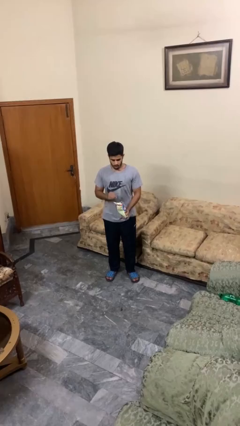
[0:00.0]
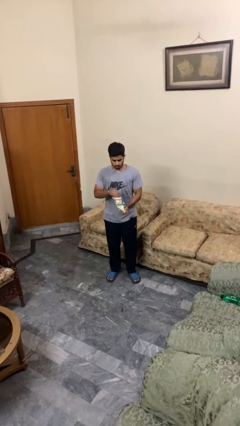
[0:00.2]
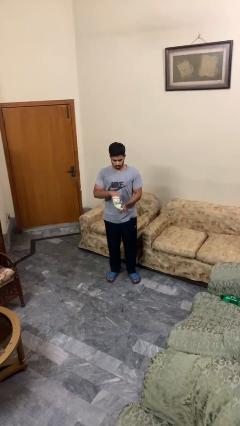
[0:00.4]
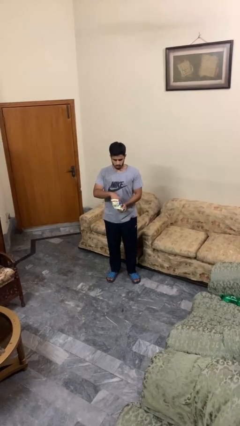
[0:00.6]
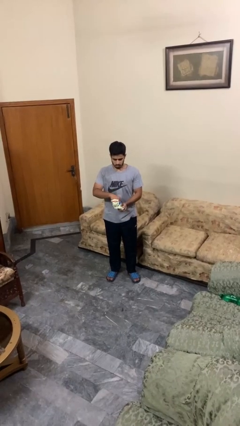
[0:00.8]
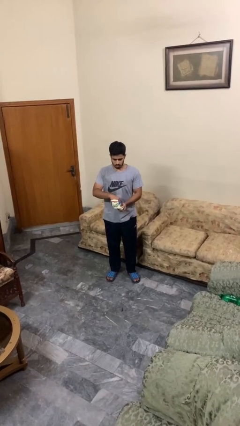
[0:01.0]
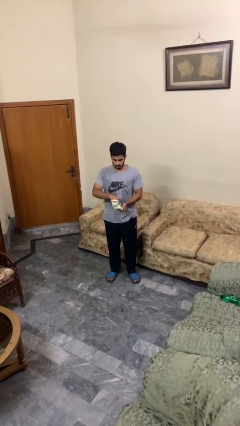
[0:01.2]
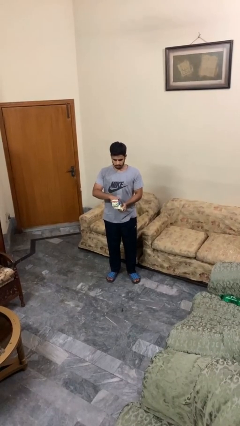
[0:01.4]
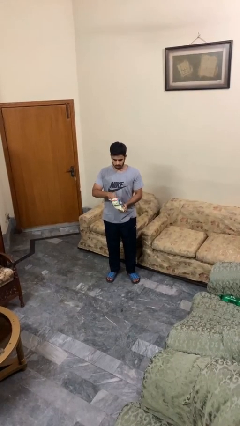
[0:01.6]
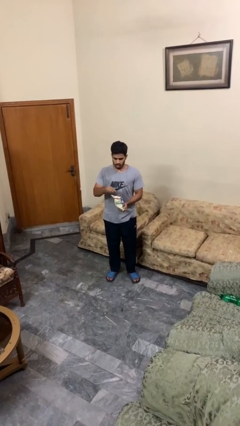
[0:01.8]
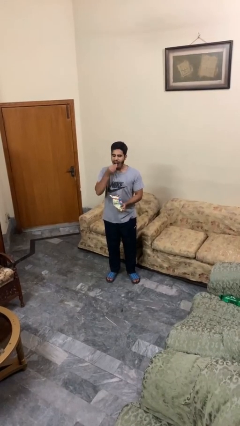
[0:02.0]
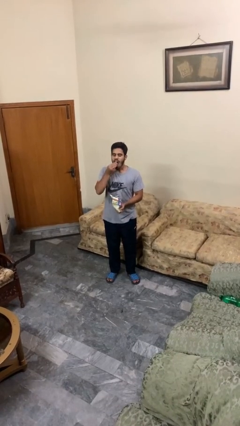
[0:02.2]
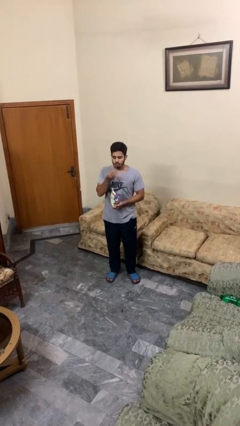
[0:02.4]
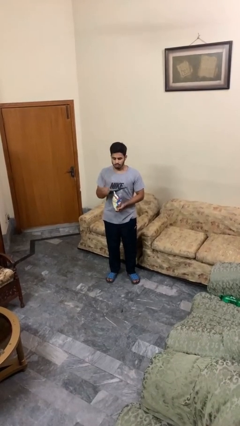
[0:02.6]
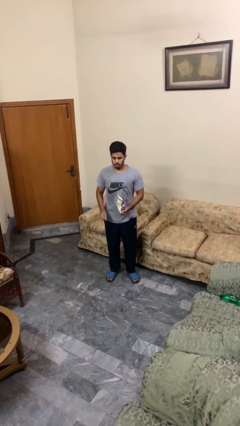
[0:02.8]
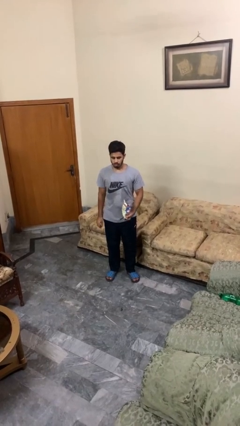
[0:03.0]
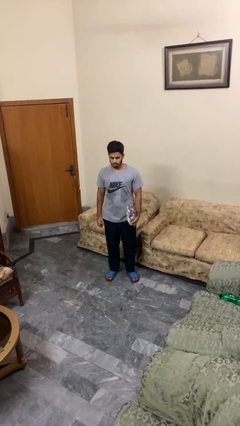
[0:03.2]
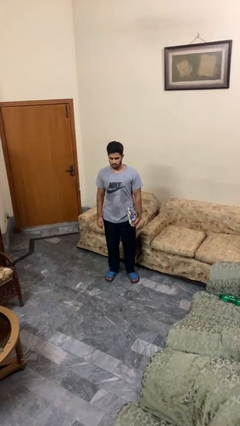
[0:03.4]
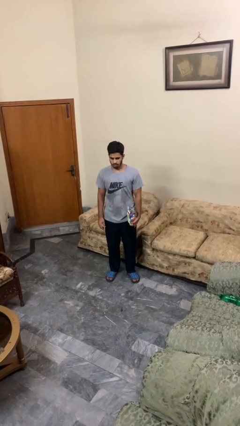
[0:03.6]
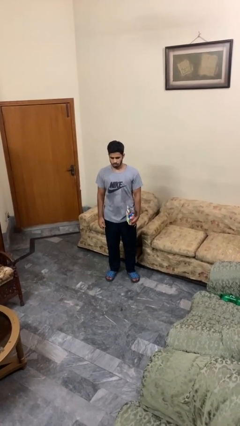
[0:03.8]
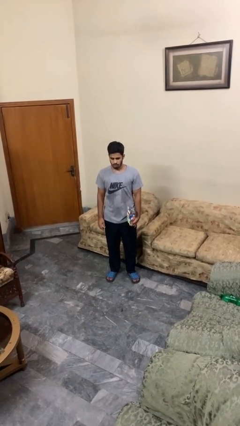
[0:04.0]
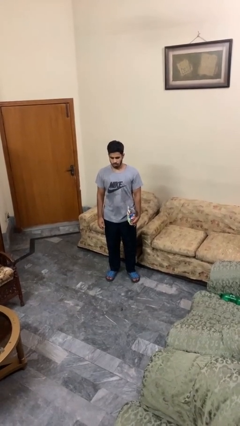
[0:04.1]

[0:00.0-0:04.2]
person eats snack from bag

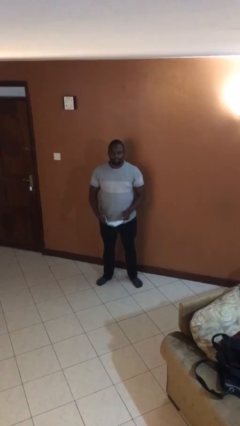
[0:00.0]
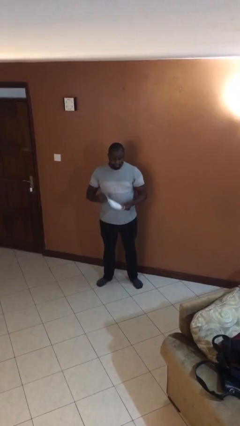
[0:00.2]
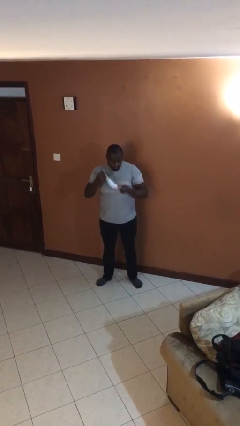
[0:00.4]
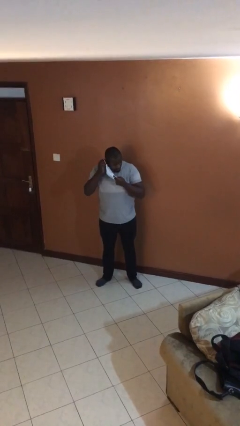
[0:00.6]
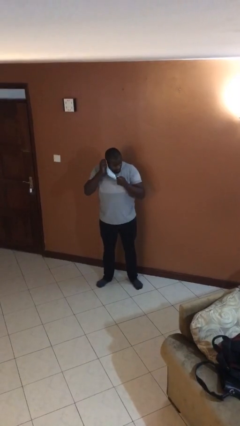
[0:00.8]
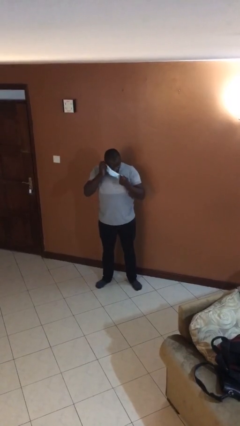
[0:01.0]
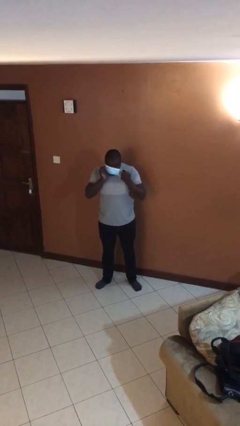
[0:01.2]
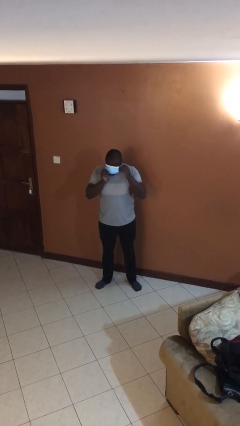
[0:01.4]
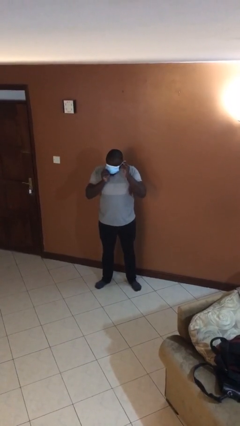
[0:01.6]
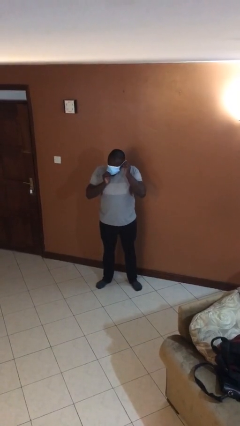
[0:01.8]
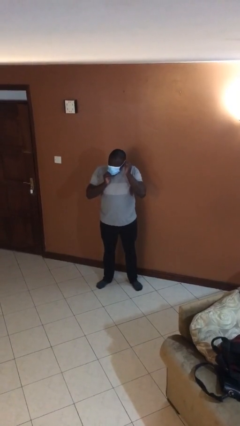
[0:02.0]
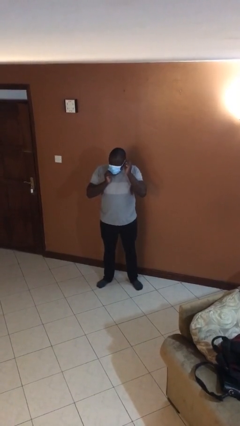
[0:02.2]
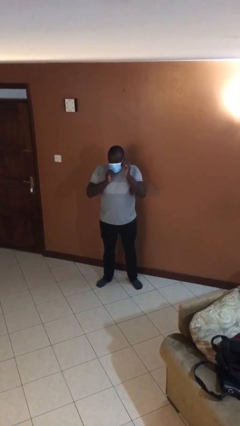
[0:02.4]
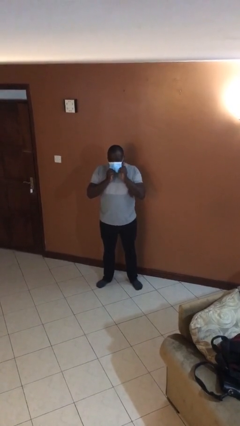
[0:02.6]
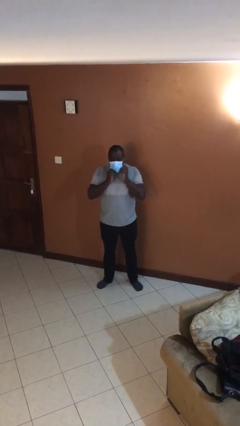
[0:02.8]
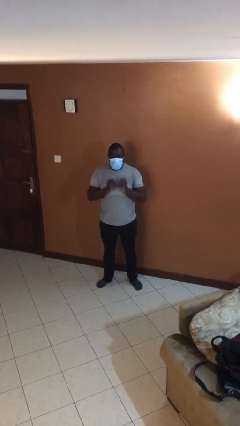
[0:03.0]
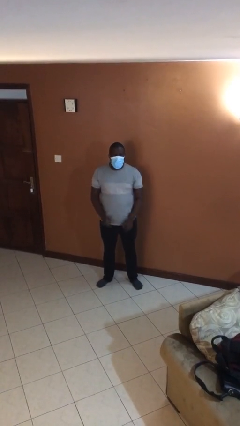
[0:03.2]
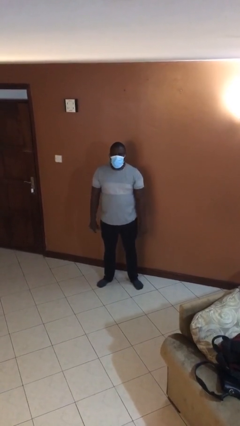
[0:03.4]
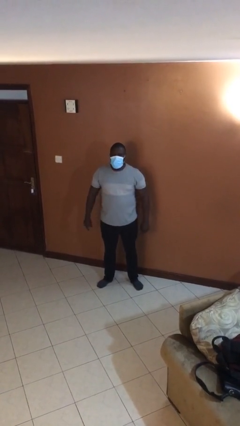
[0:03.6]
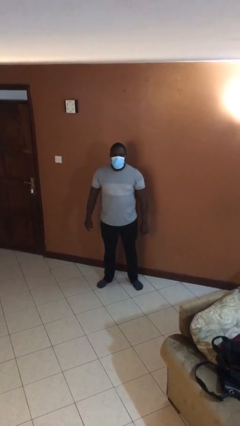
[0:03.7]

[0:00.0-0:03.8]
person puts on facemask

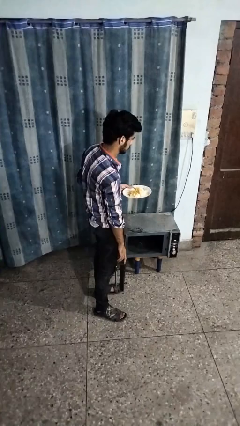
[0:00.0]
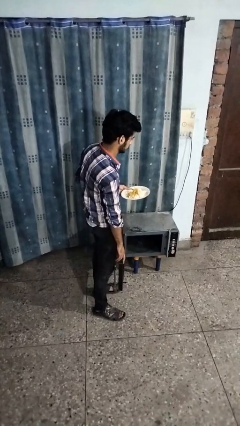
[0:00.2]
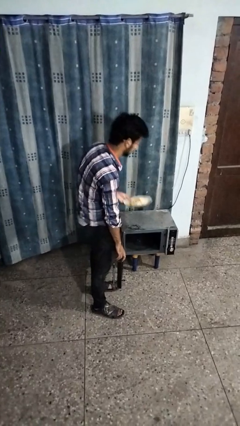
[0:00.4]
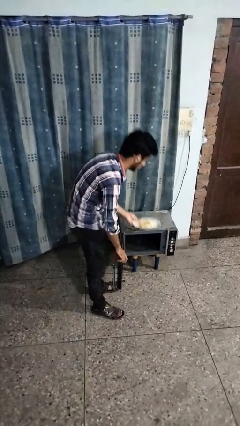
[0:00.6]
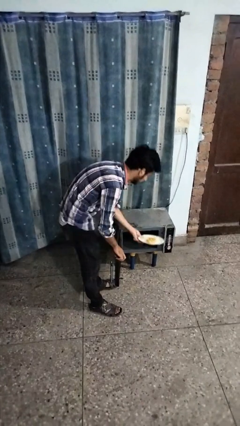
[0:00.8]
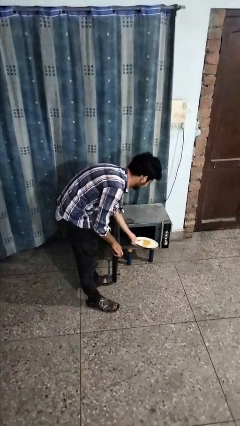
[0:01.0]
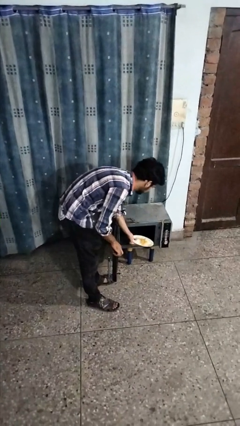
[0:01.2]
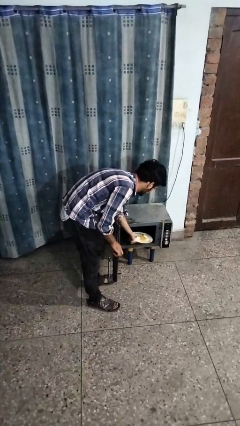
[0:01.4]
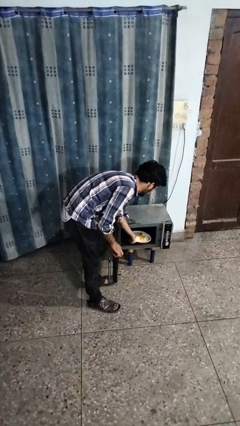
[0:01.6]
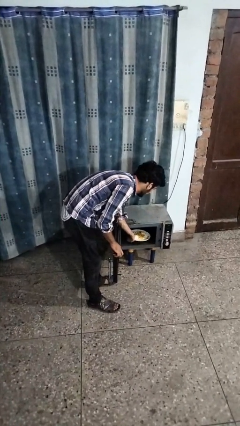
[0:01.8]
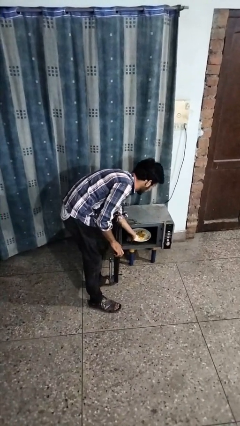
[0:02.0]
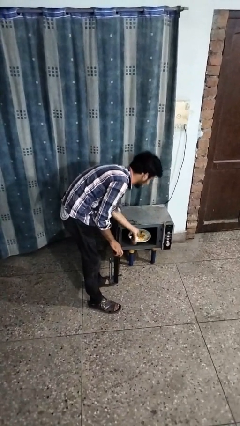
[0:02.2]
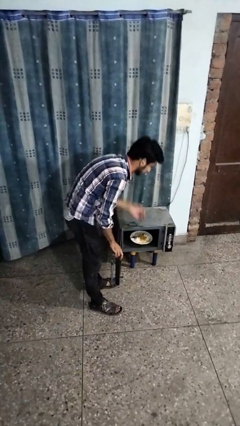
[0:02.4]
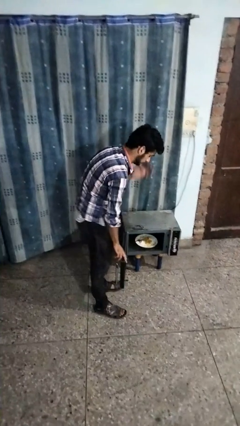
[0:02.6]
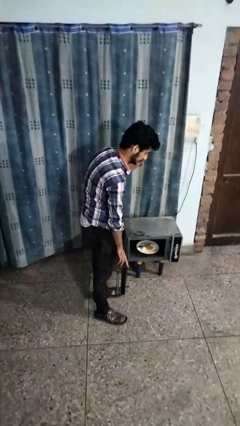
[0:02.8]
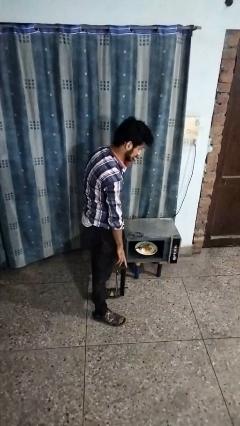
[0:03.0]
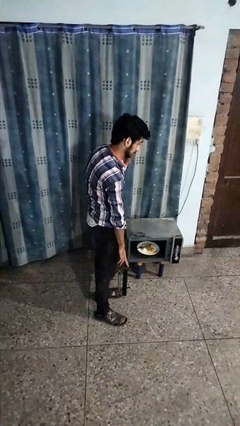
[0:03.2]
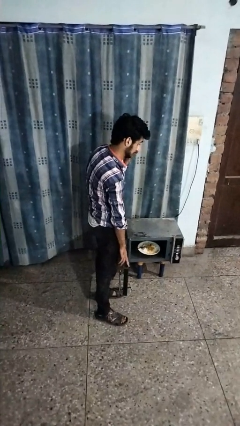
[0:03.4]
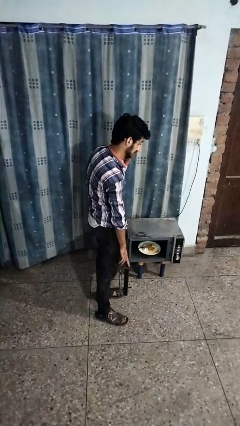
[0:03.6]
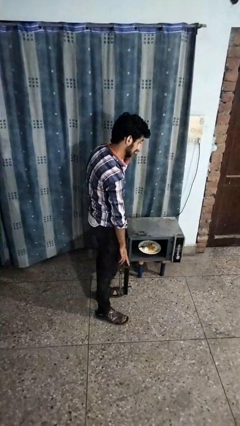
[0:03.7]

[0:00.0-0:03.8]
person puts object into oven

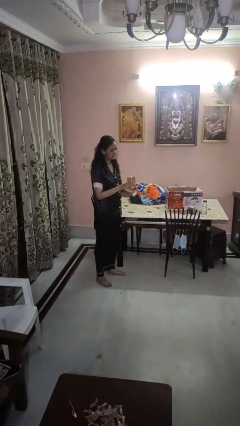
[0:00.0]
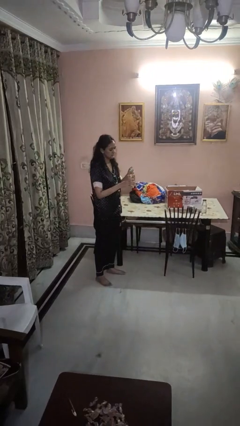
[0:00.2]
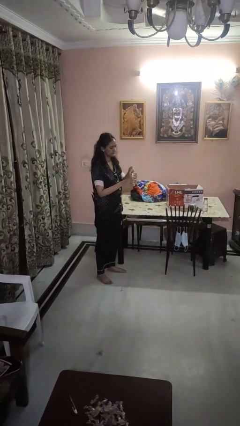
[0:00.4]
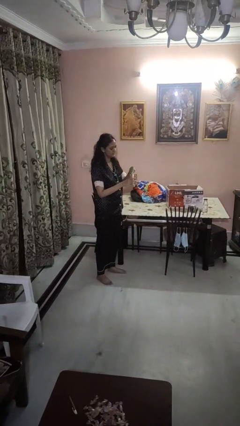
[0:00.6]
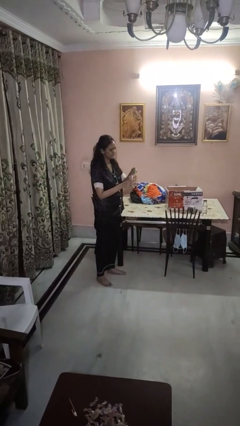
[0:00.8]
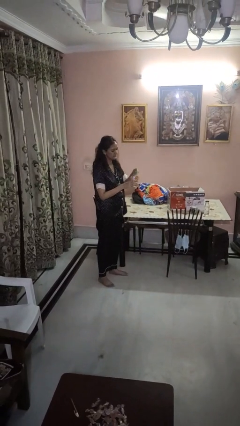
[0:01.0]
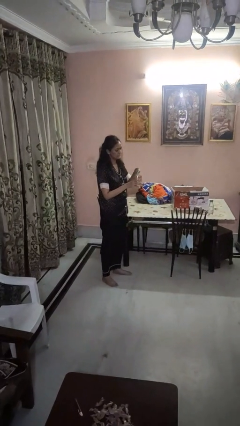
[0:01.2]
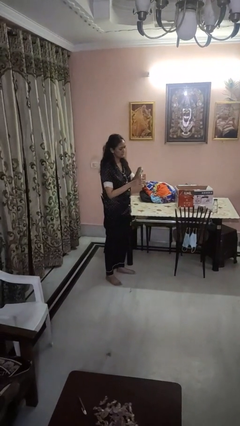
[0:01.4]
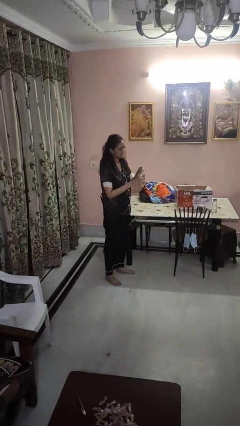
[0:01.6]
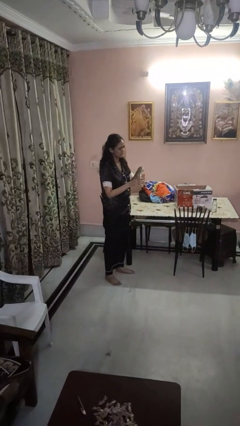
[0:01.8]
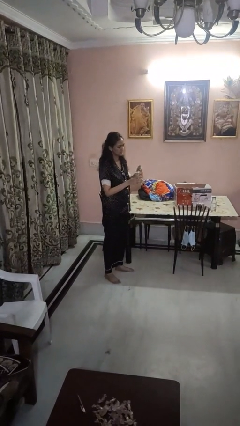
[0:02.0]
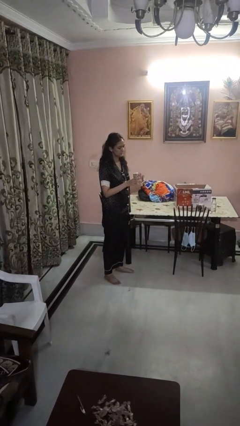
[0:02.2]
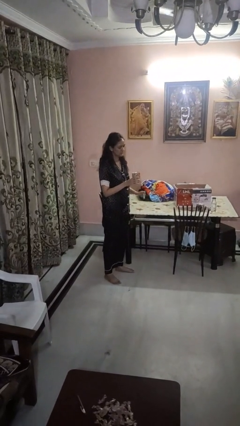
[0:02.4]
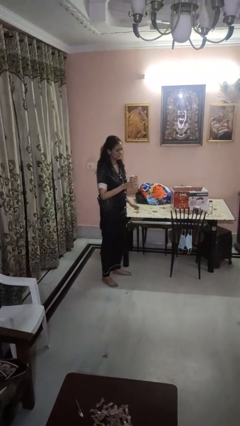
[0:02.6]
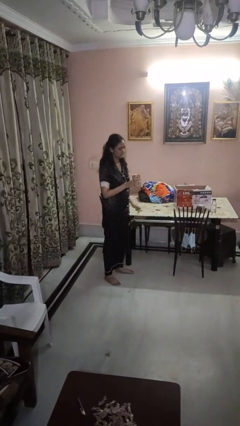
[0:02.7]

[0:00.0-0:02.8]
person opens can with can opener

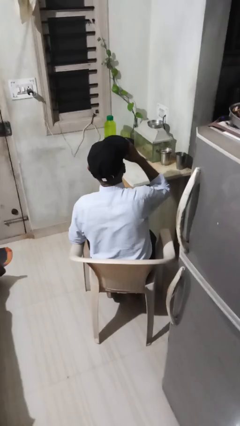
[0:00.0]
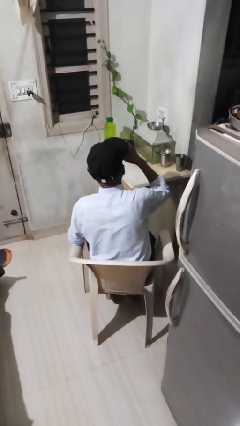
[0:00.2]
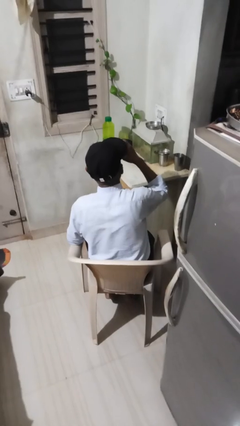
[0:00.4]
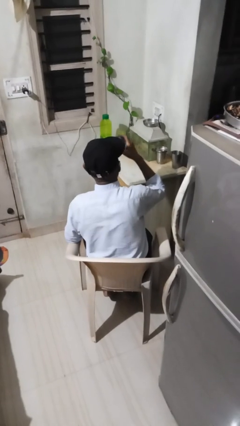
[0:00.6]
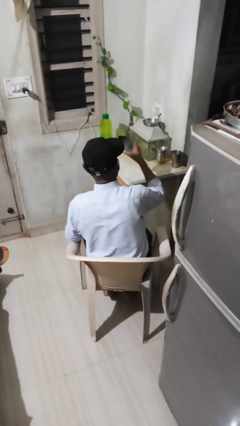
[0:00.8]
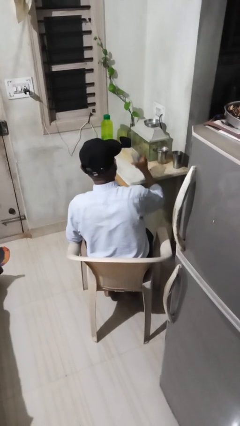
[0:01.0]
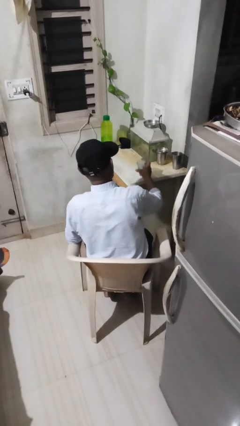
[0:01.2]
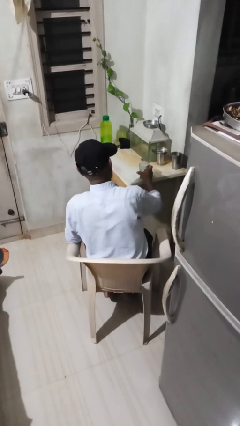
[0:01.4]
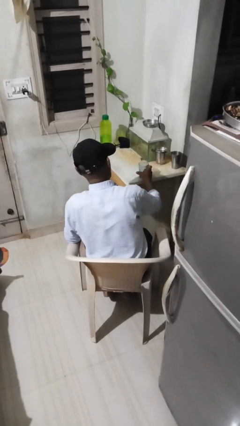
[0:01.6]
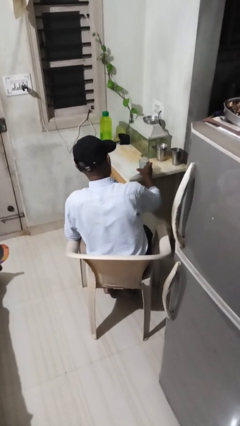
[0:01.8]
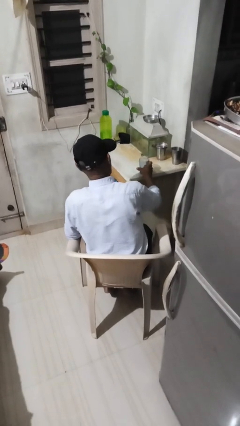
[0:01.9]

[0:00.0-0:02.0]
person puts down object on table

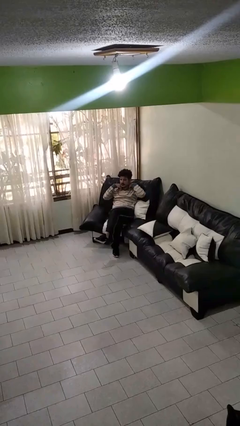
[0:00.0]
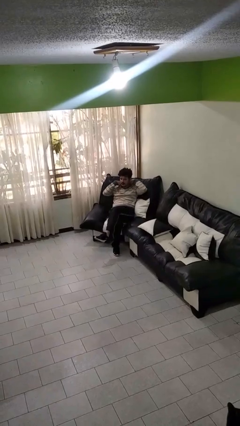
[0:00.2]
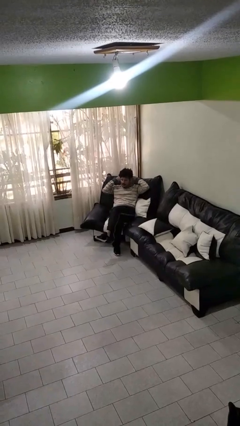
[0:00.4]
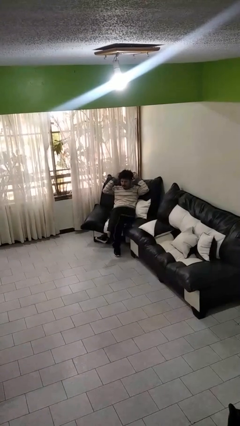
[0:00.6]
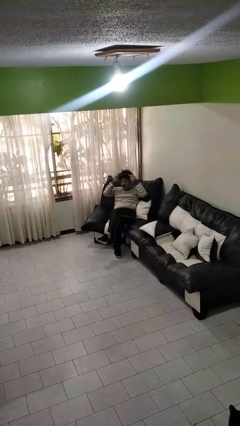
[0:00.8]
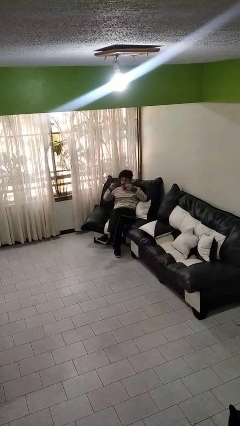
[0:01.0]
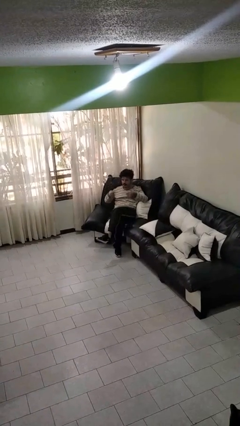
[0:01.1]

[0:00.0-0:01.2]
person takes off necklace
